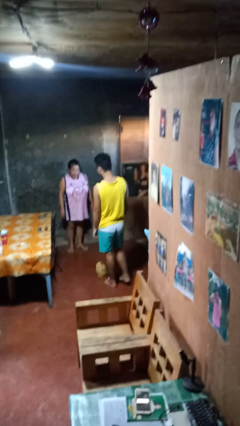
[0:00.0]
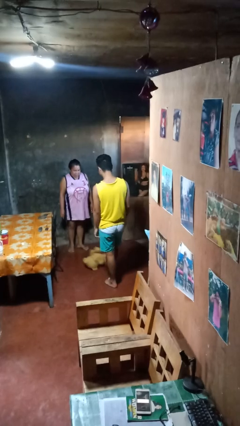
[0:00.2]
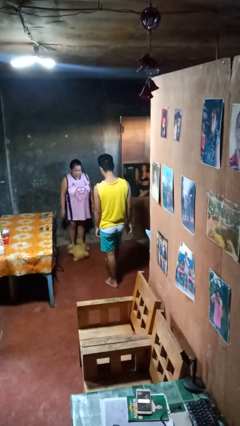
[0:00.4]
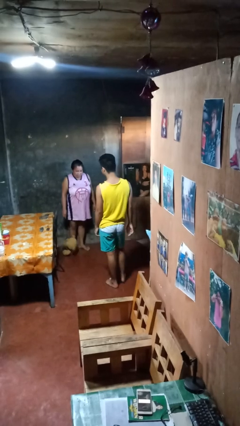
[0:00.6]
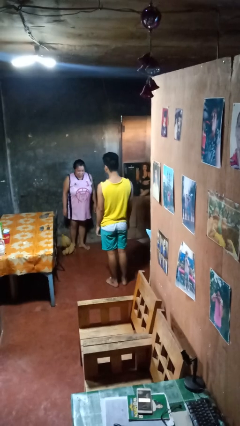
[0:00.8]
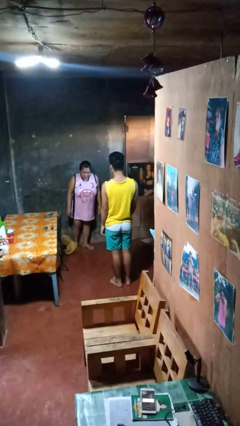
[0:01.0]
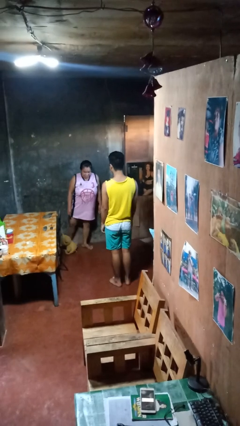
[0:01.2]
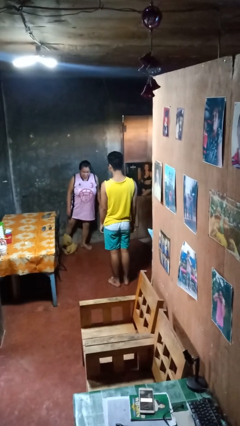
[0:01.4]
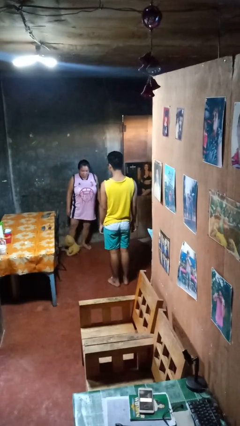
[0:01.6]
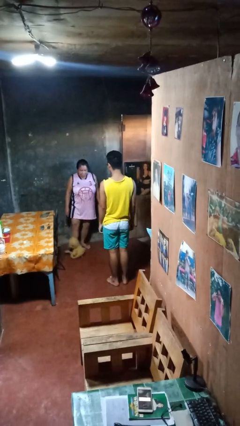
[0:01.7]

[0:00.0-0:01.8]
person kicks object to person

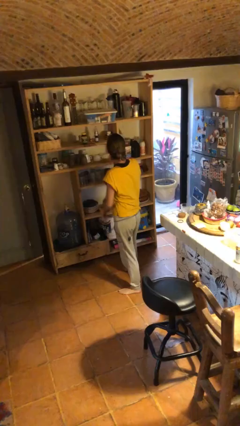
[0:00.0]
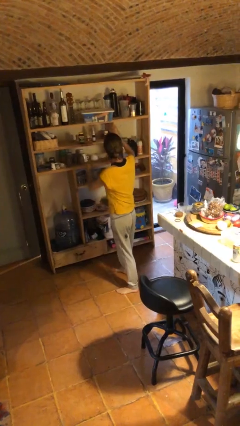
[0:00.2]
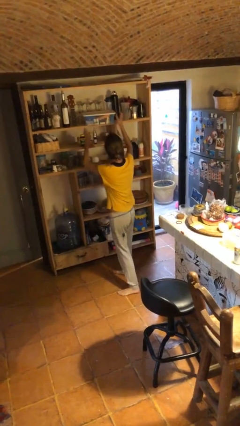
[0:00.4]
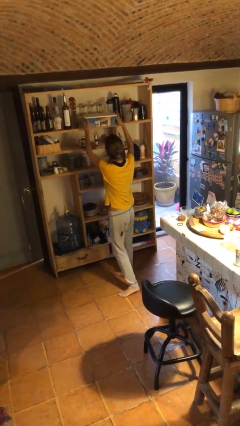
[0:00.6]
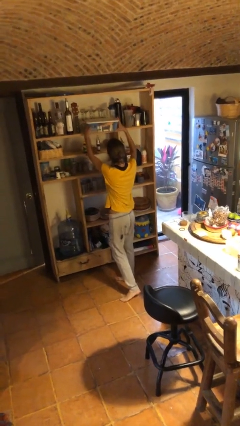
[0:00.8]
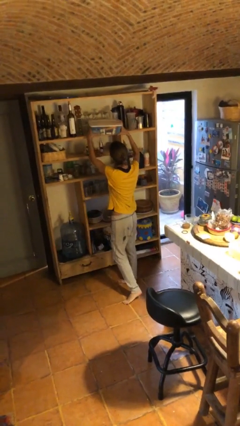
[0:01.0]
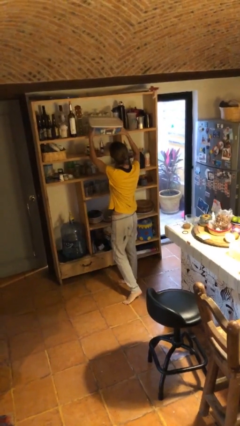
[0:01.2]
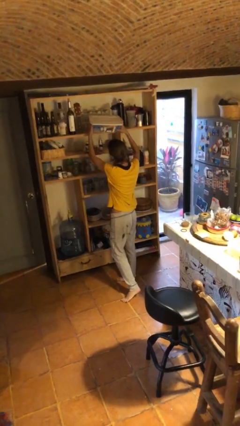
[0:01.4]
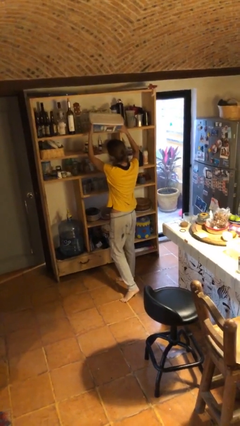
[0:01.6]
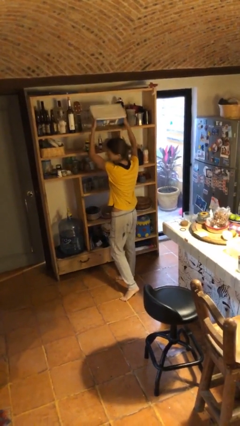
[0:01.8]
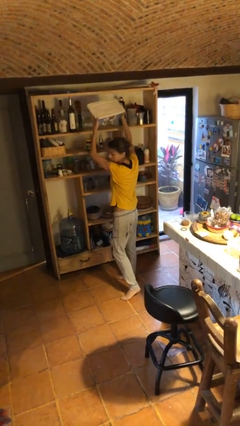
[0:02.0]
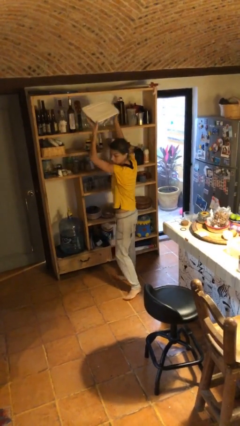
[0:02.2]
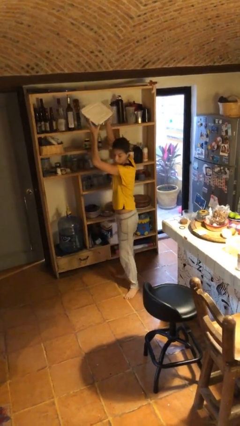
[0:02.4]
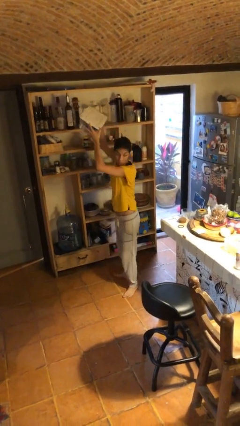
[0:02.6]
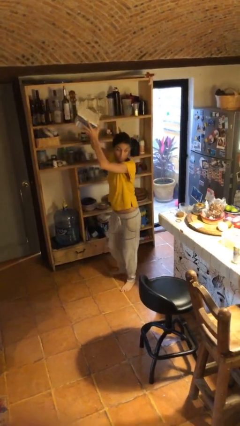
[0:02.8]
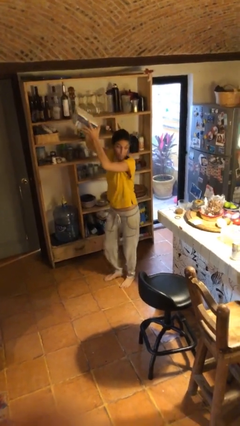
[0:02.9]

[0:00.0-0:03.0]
person picks up object from shelf

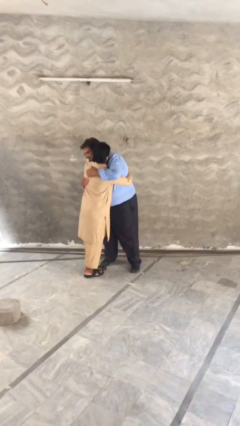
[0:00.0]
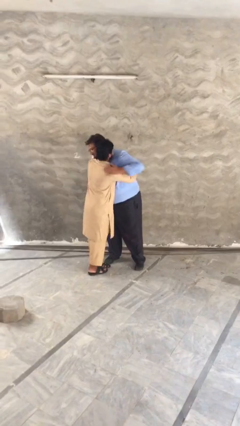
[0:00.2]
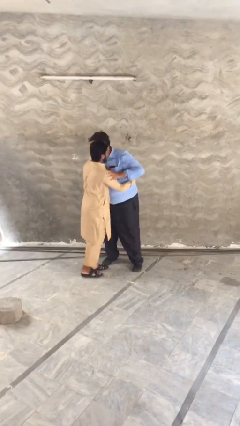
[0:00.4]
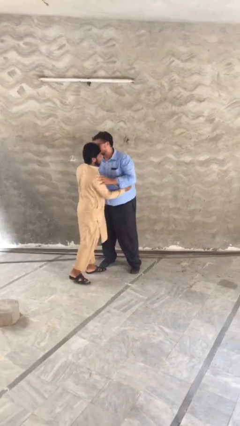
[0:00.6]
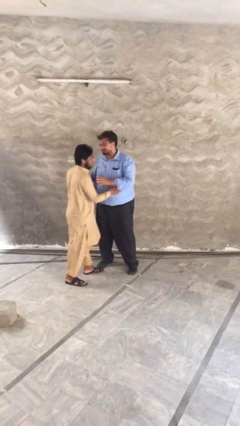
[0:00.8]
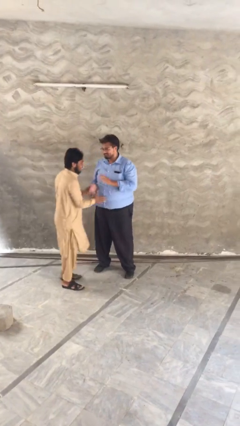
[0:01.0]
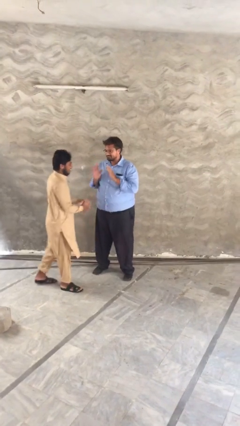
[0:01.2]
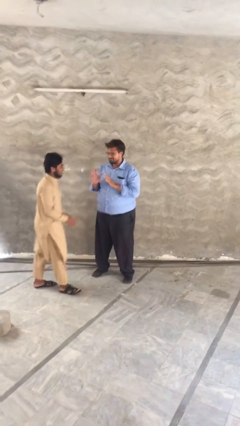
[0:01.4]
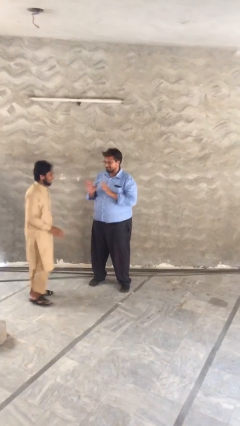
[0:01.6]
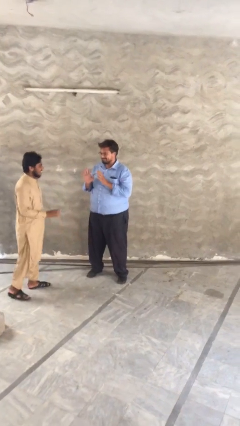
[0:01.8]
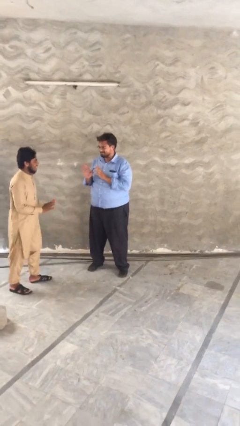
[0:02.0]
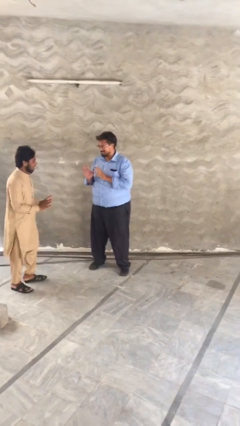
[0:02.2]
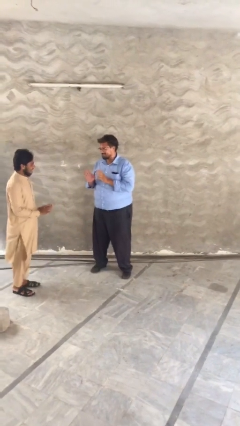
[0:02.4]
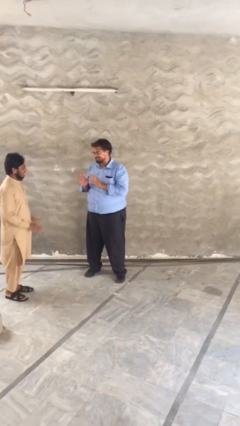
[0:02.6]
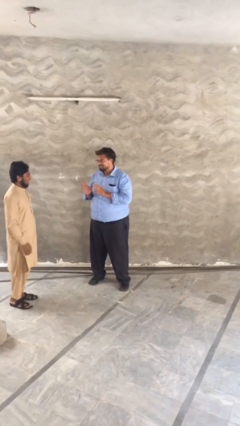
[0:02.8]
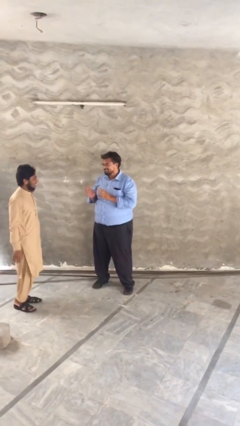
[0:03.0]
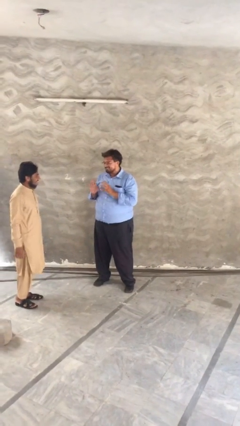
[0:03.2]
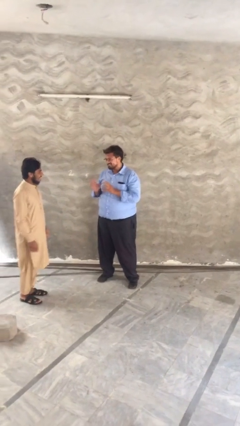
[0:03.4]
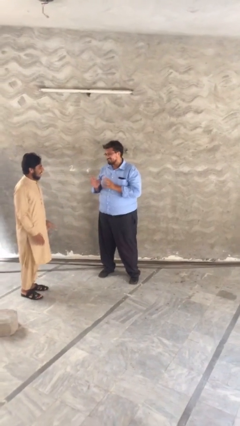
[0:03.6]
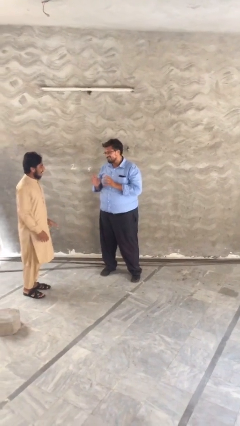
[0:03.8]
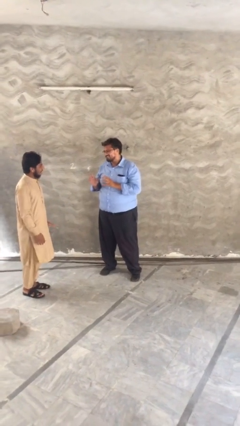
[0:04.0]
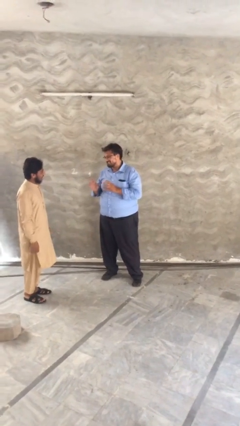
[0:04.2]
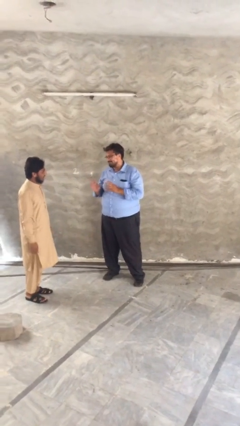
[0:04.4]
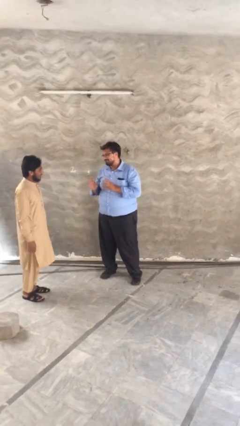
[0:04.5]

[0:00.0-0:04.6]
person talks to person

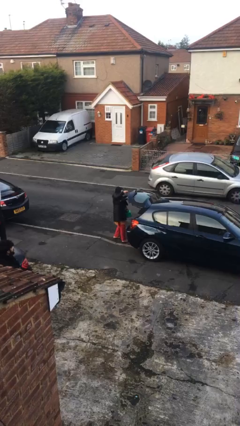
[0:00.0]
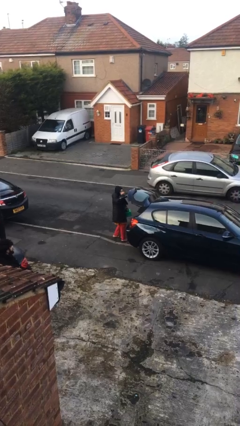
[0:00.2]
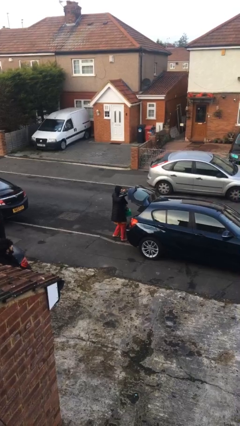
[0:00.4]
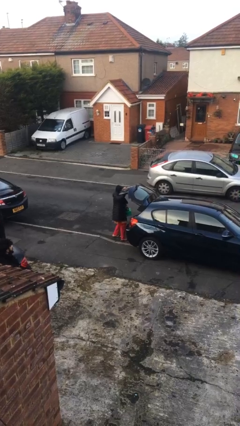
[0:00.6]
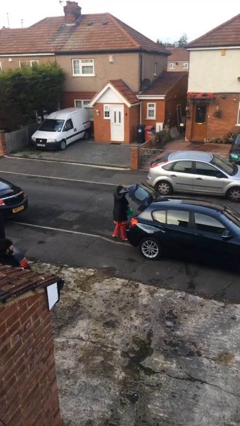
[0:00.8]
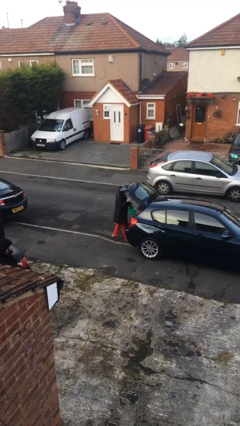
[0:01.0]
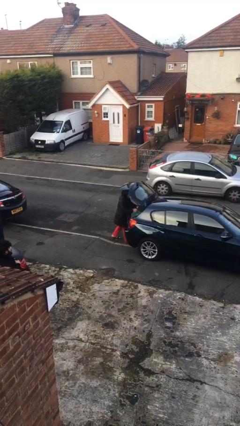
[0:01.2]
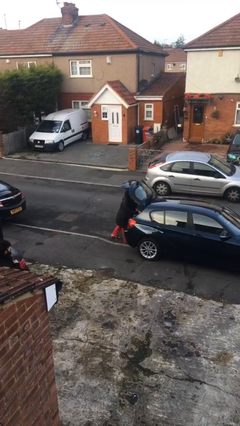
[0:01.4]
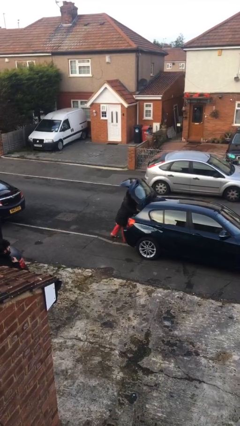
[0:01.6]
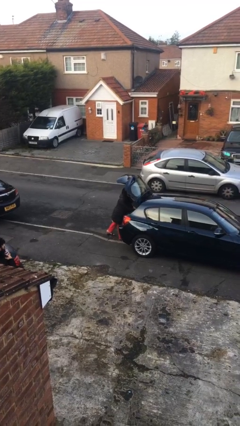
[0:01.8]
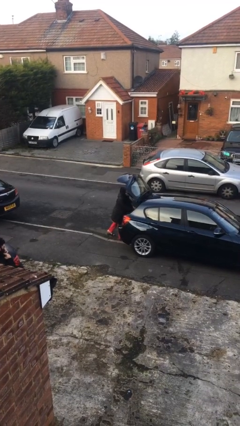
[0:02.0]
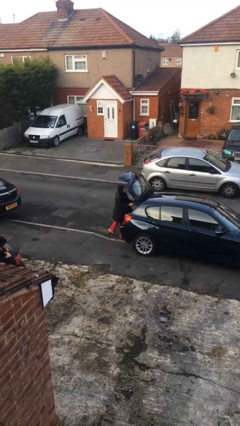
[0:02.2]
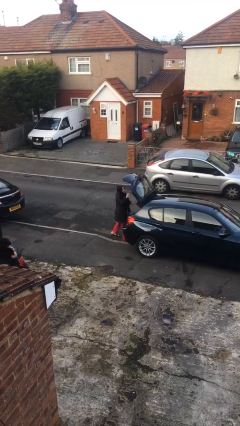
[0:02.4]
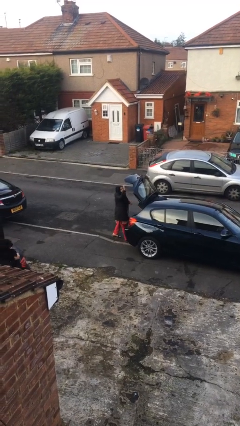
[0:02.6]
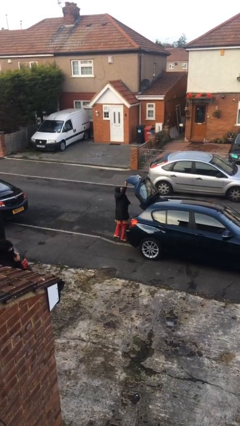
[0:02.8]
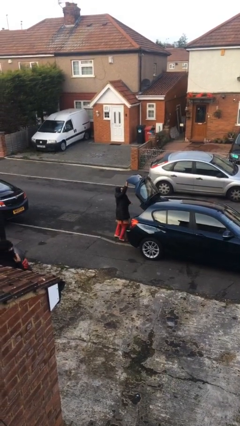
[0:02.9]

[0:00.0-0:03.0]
person loads car

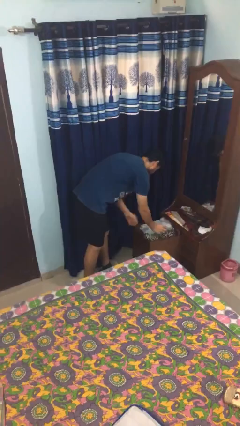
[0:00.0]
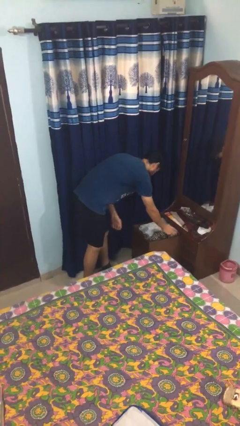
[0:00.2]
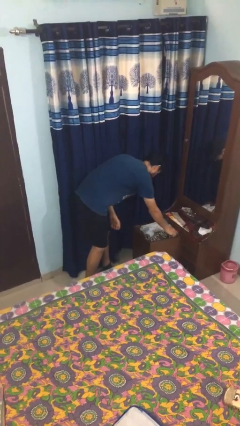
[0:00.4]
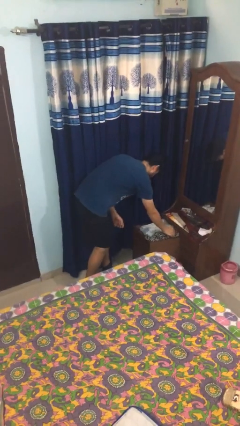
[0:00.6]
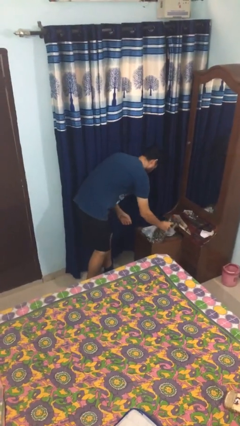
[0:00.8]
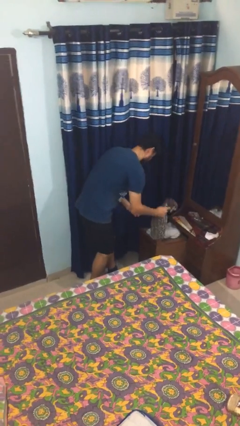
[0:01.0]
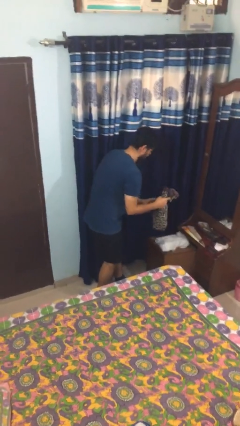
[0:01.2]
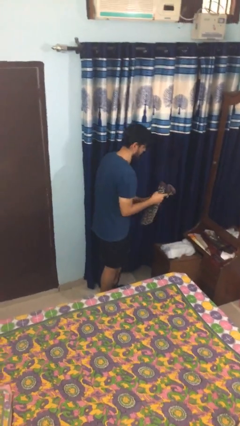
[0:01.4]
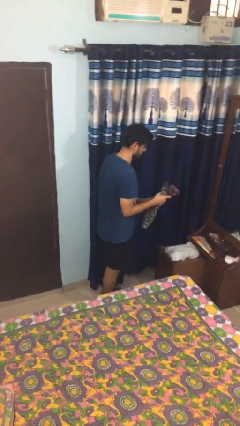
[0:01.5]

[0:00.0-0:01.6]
person takes clothes from dresser

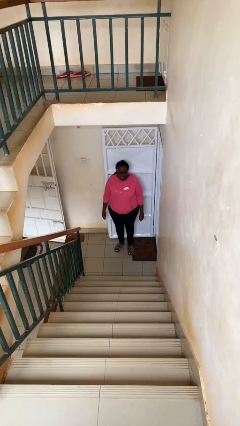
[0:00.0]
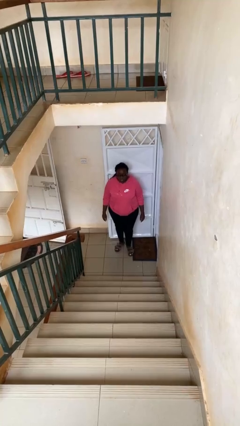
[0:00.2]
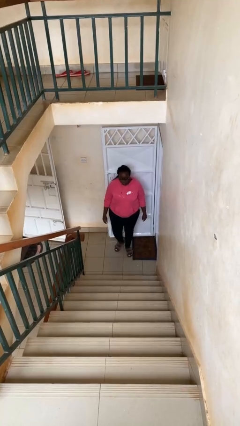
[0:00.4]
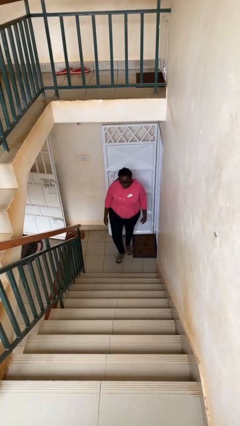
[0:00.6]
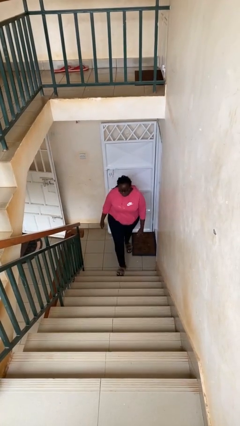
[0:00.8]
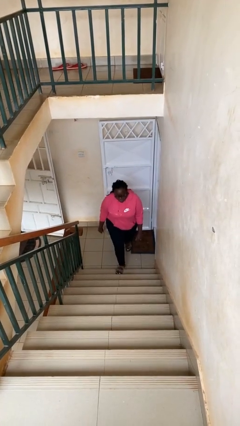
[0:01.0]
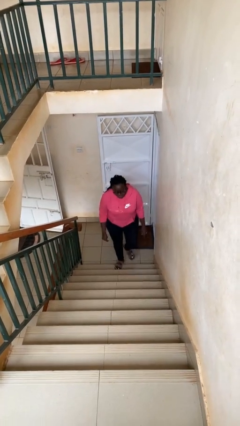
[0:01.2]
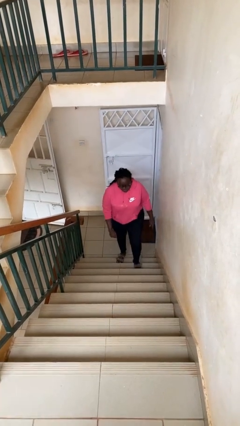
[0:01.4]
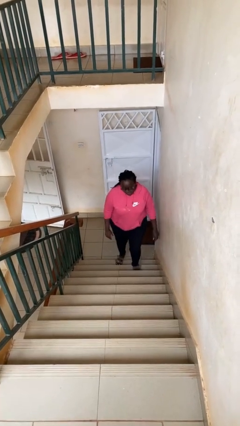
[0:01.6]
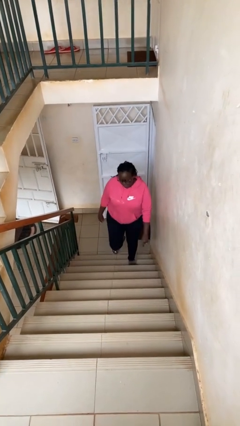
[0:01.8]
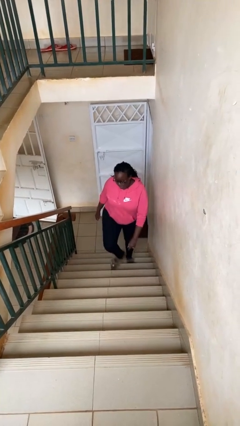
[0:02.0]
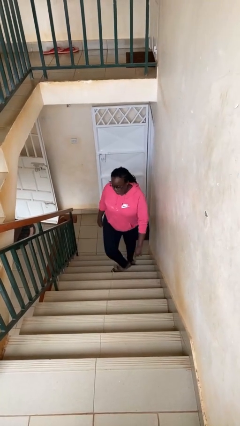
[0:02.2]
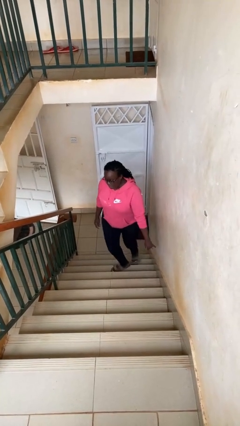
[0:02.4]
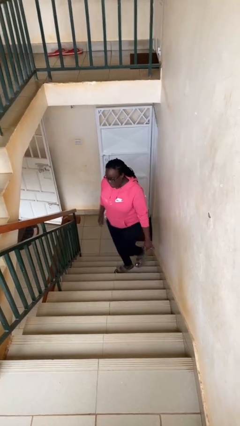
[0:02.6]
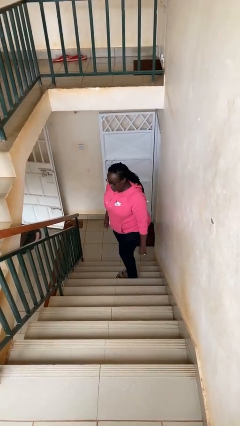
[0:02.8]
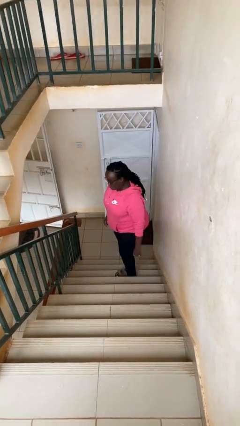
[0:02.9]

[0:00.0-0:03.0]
person climbs up stairs

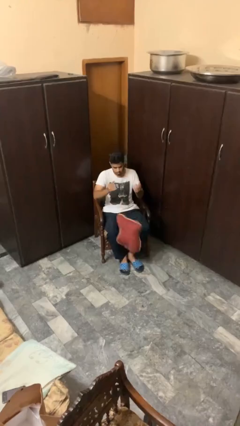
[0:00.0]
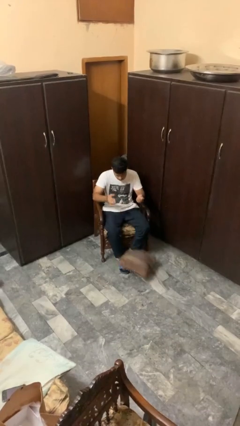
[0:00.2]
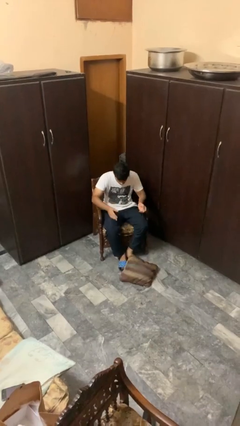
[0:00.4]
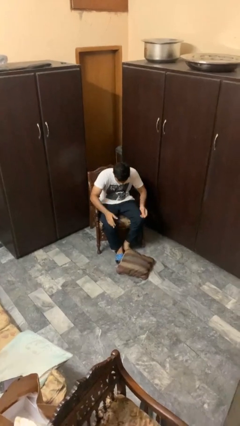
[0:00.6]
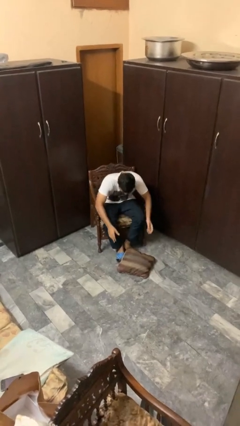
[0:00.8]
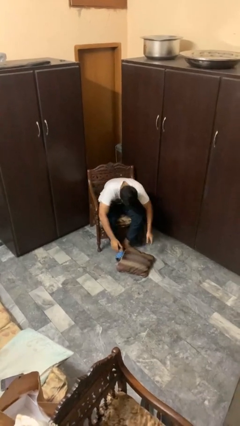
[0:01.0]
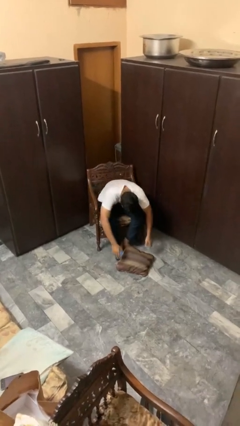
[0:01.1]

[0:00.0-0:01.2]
person drops object
